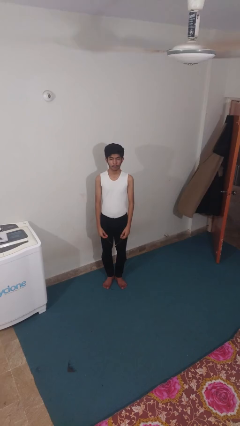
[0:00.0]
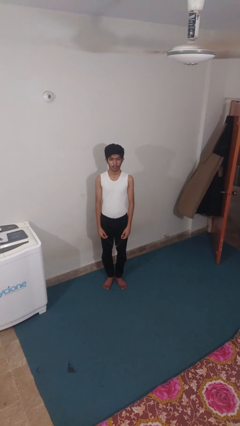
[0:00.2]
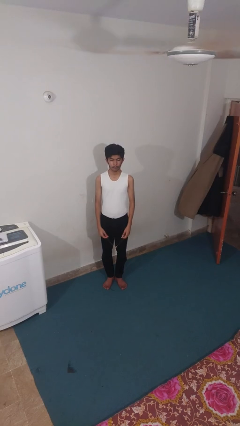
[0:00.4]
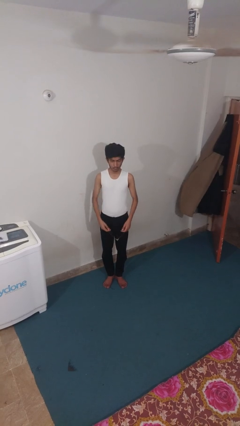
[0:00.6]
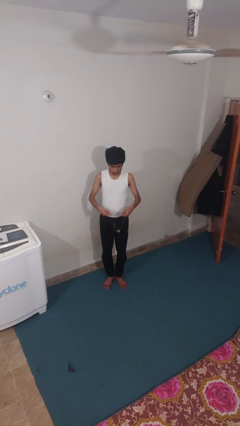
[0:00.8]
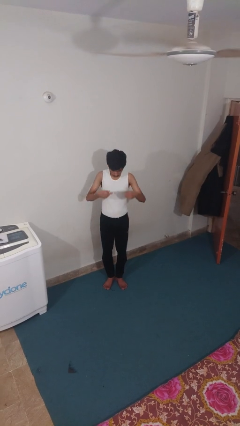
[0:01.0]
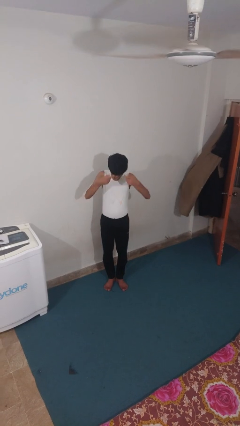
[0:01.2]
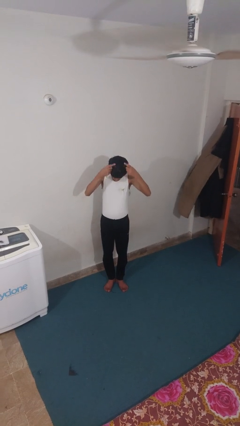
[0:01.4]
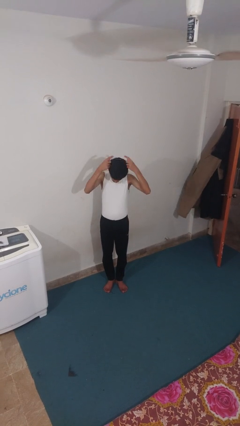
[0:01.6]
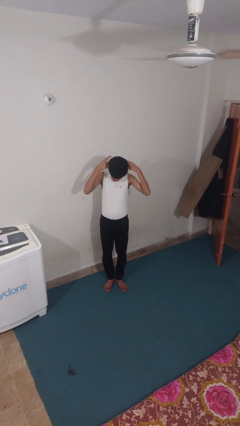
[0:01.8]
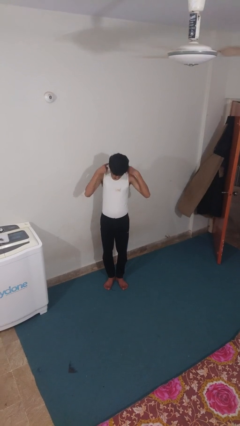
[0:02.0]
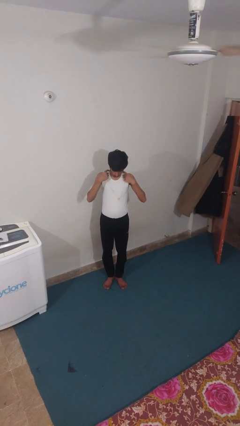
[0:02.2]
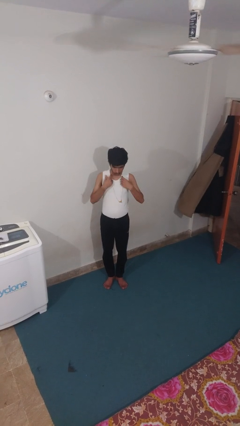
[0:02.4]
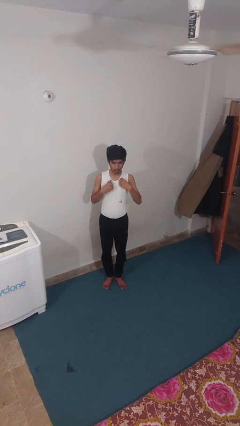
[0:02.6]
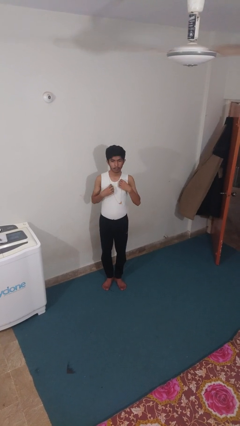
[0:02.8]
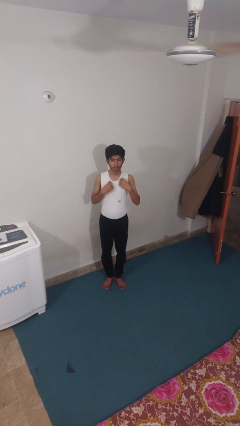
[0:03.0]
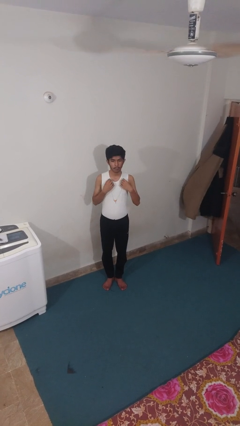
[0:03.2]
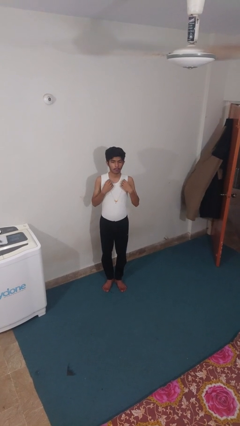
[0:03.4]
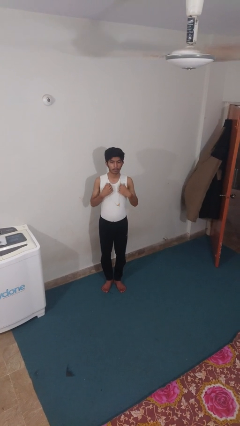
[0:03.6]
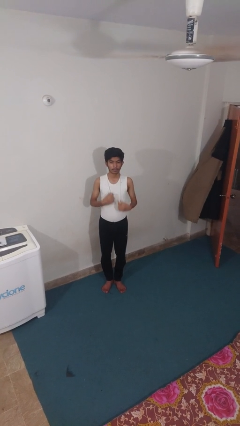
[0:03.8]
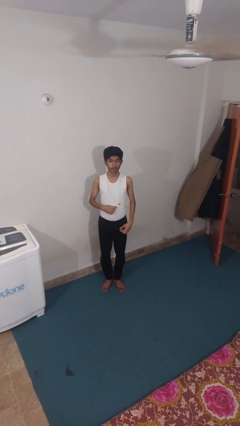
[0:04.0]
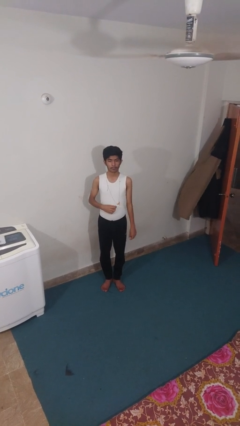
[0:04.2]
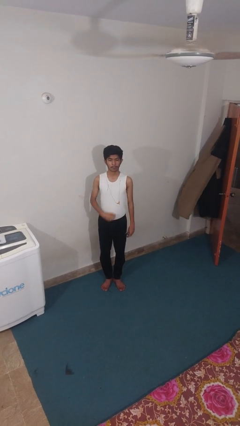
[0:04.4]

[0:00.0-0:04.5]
person puts on necklace

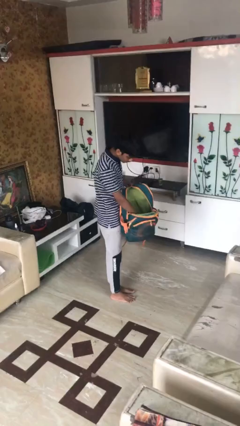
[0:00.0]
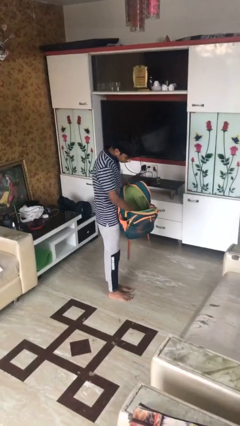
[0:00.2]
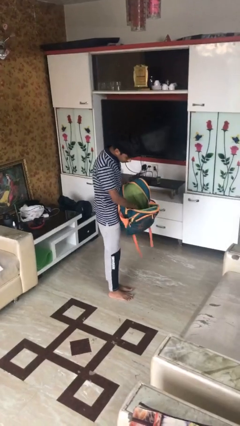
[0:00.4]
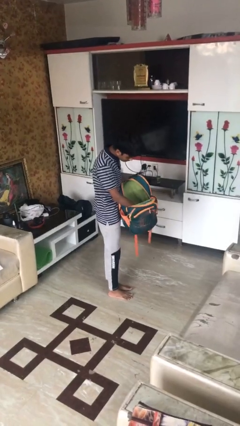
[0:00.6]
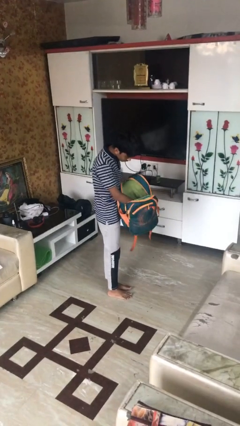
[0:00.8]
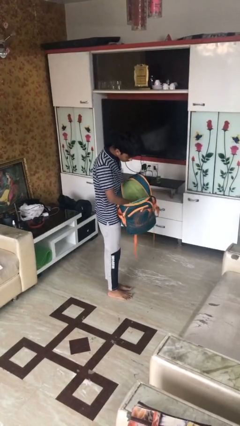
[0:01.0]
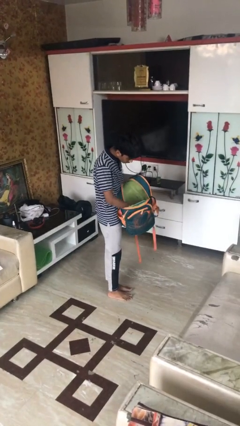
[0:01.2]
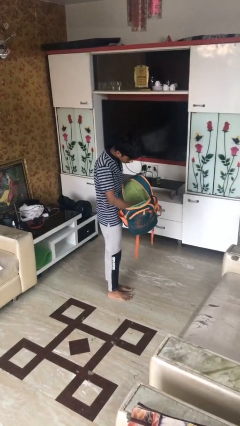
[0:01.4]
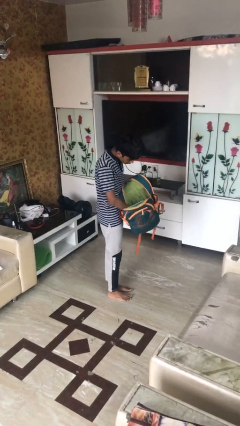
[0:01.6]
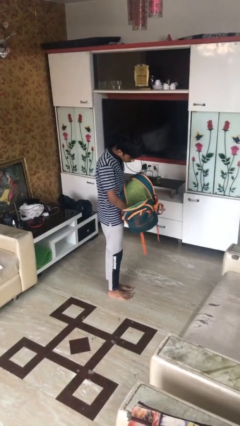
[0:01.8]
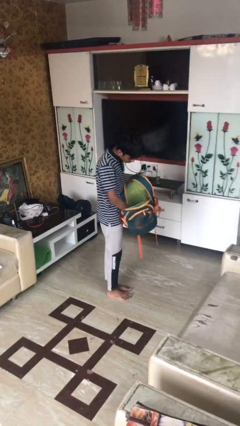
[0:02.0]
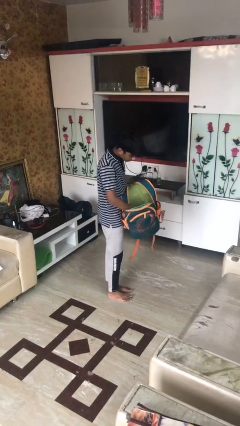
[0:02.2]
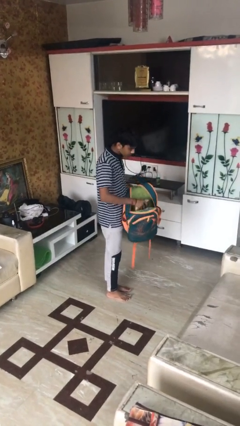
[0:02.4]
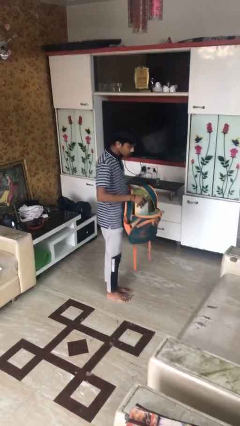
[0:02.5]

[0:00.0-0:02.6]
person searches in backpack

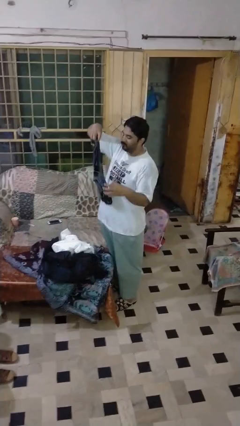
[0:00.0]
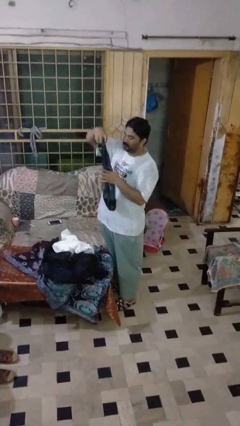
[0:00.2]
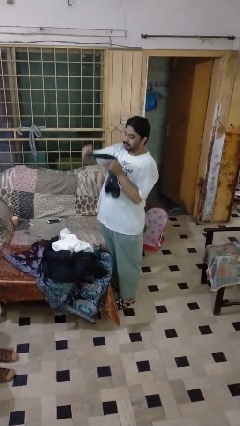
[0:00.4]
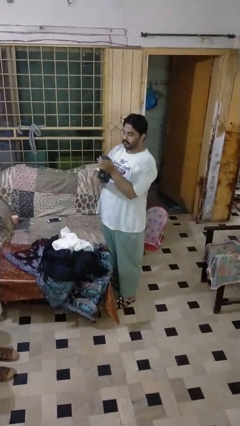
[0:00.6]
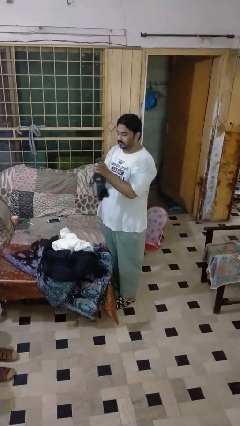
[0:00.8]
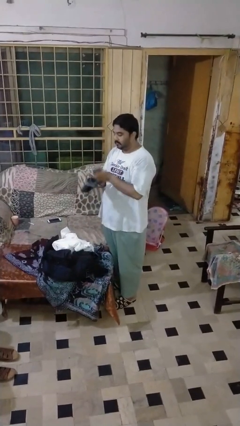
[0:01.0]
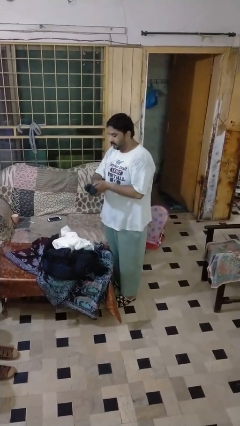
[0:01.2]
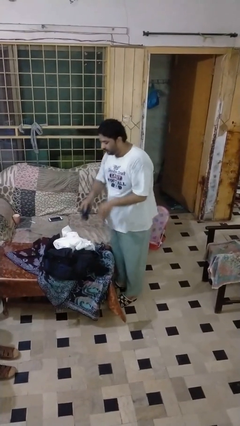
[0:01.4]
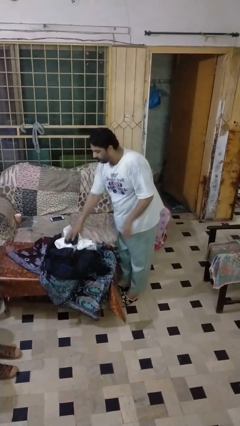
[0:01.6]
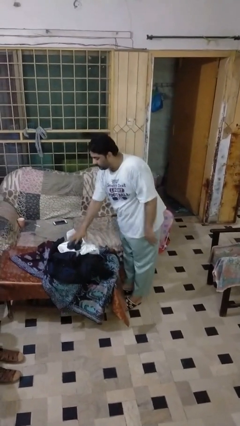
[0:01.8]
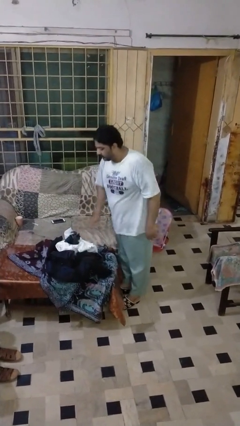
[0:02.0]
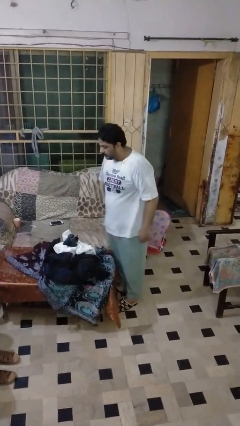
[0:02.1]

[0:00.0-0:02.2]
person folds socks

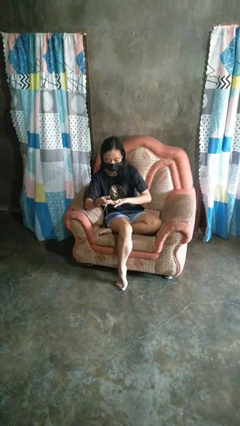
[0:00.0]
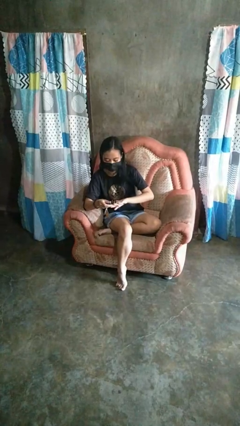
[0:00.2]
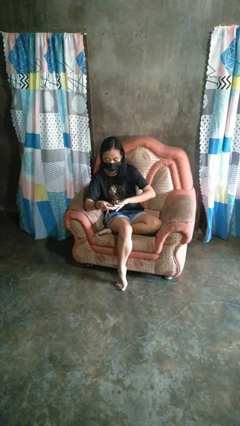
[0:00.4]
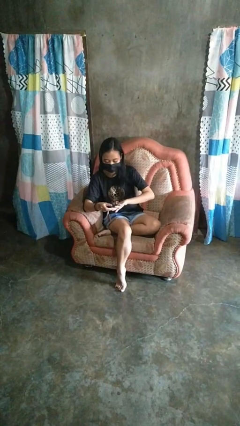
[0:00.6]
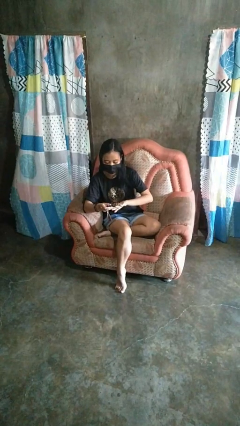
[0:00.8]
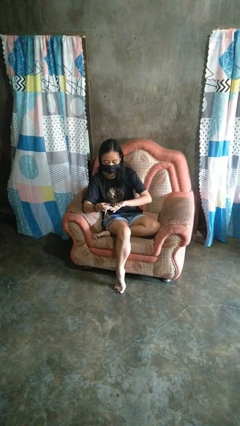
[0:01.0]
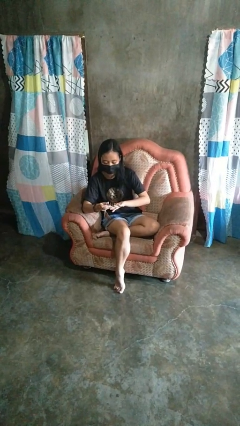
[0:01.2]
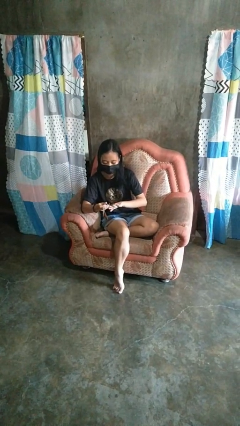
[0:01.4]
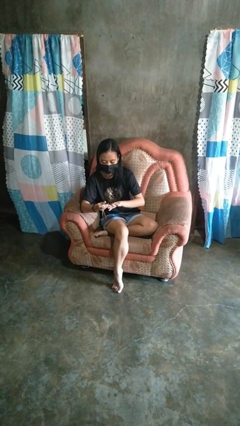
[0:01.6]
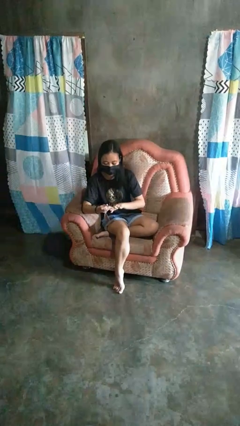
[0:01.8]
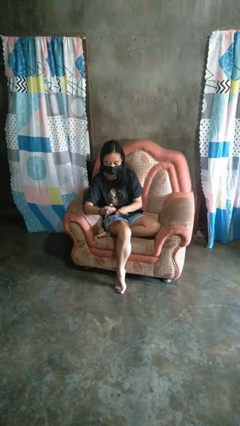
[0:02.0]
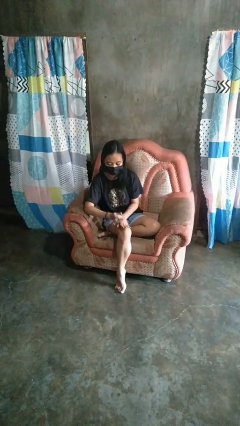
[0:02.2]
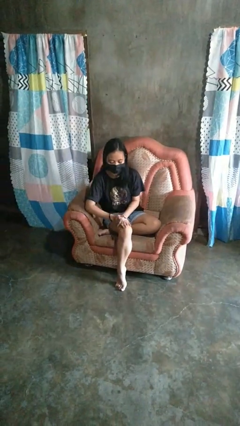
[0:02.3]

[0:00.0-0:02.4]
person clips fingernails

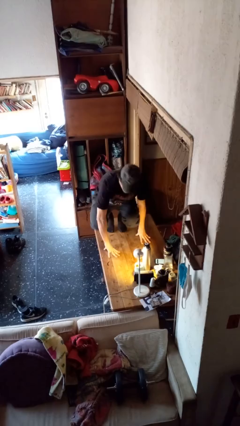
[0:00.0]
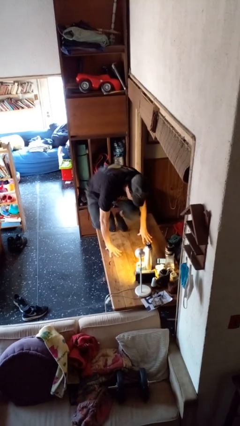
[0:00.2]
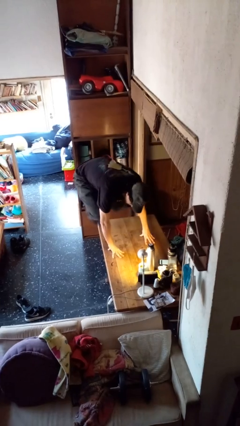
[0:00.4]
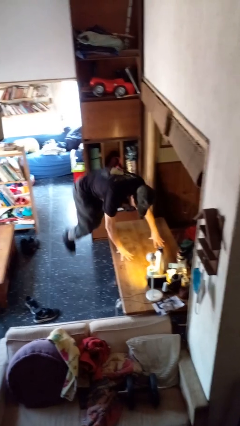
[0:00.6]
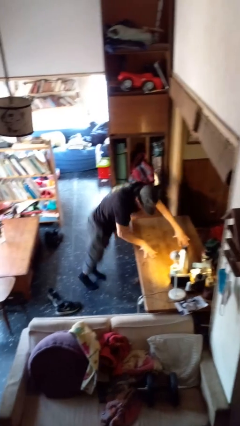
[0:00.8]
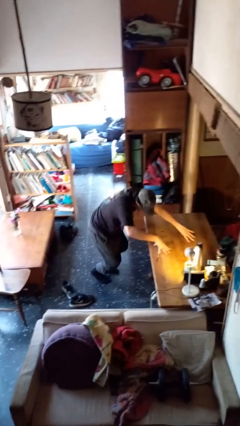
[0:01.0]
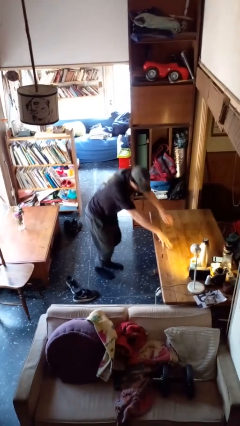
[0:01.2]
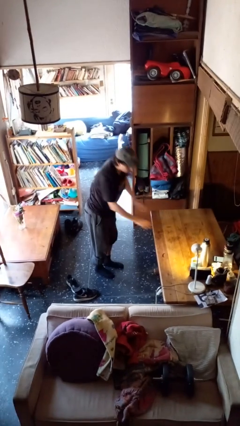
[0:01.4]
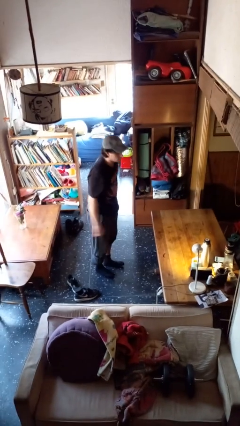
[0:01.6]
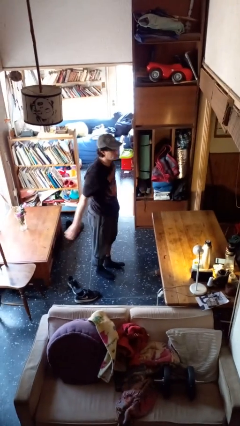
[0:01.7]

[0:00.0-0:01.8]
person climbs off table

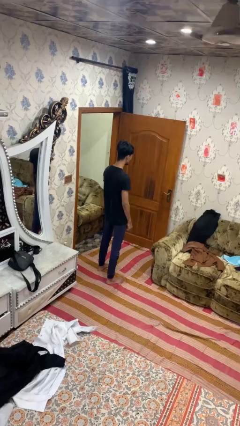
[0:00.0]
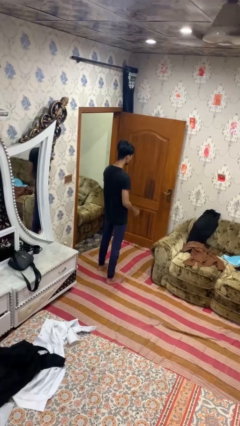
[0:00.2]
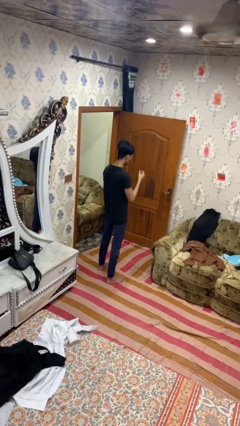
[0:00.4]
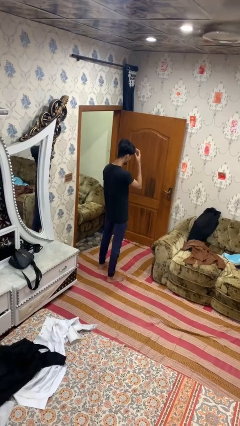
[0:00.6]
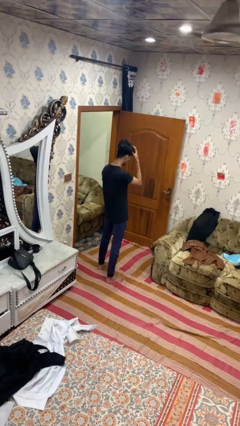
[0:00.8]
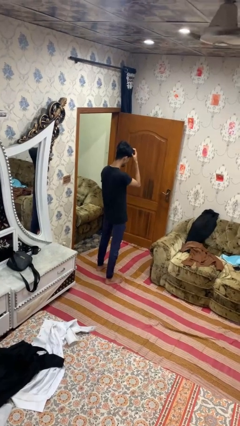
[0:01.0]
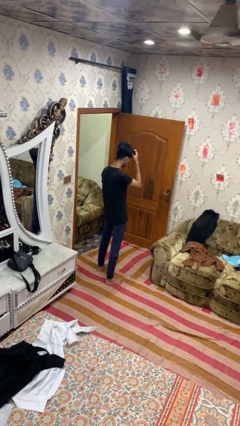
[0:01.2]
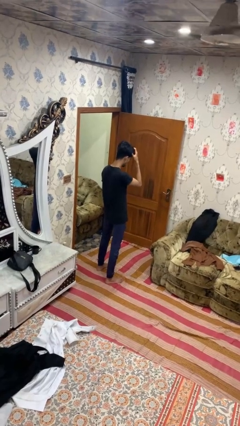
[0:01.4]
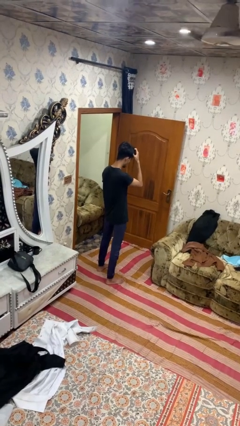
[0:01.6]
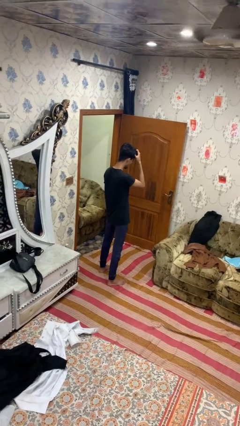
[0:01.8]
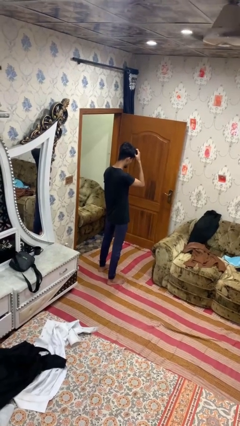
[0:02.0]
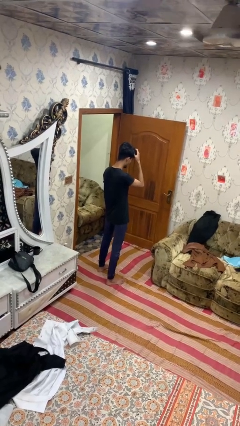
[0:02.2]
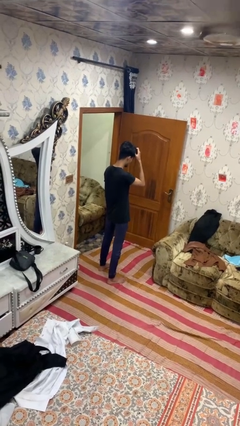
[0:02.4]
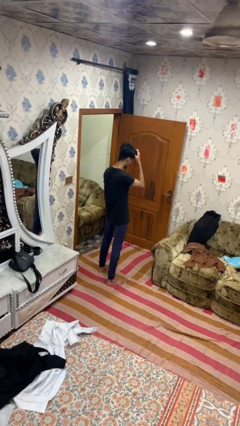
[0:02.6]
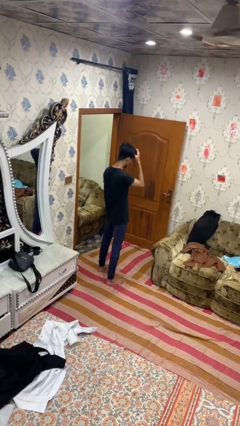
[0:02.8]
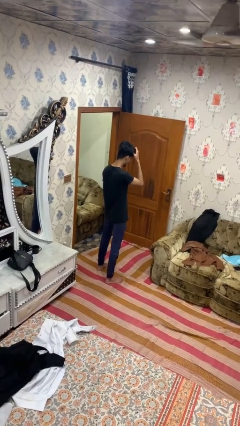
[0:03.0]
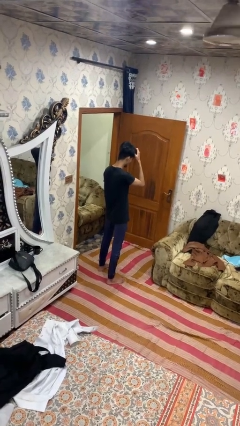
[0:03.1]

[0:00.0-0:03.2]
person strokes hair

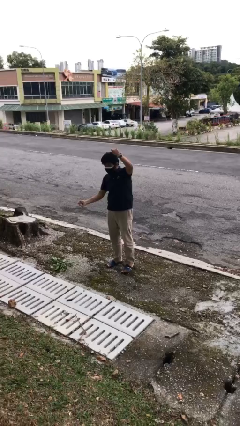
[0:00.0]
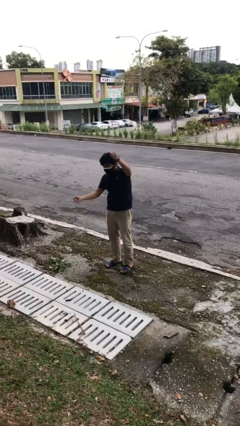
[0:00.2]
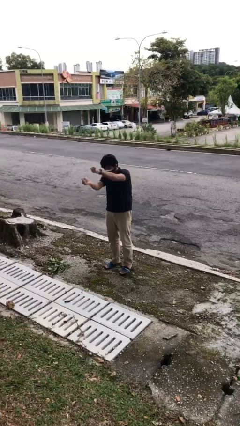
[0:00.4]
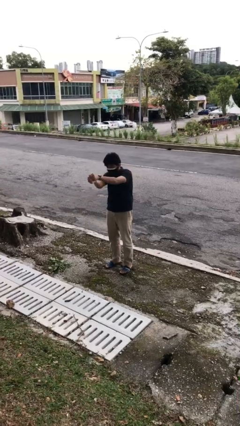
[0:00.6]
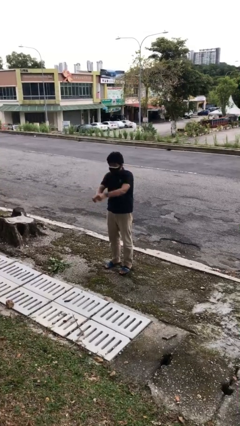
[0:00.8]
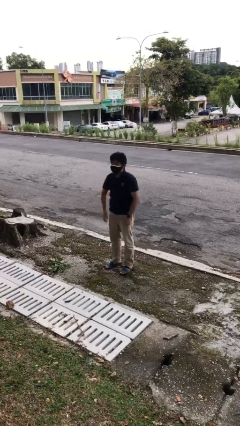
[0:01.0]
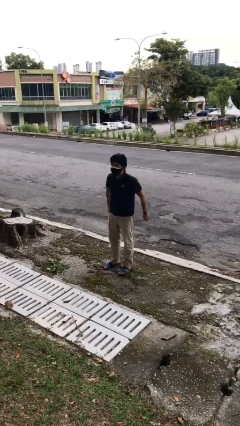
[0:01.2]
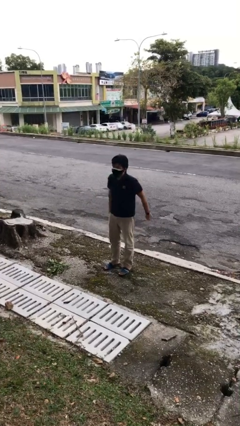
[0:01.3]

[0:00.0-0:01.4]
person gestures zoom out
